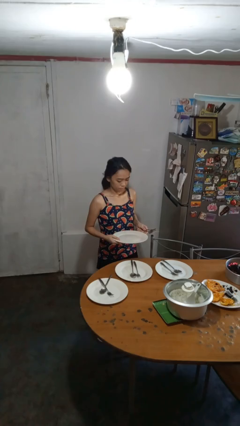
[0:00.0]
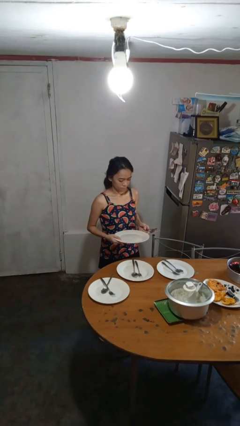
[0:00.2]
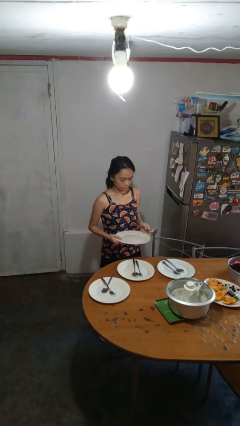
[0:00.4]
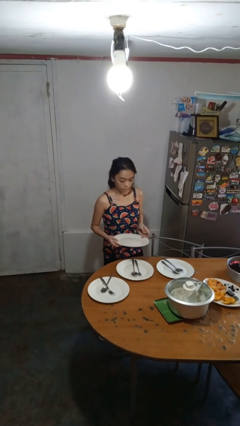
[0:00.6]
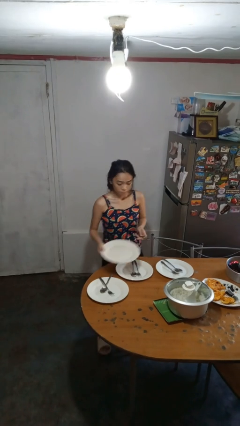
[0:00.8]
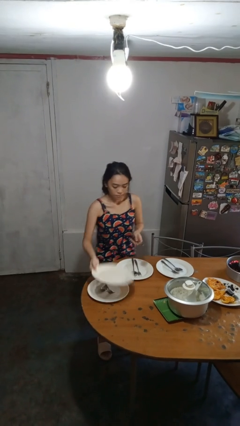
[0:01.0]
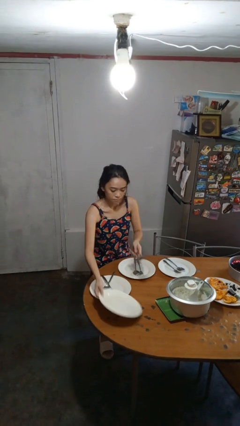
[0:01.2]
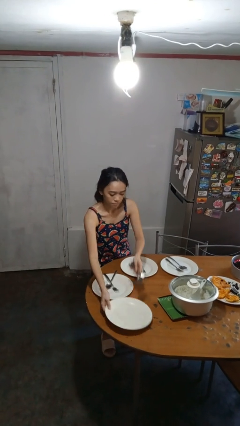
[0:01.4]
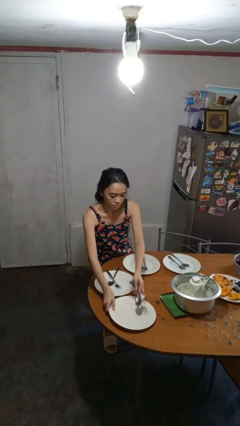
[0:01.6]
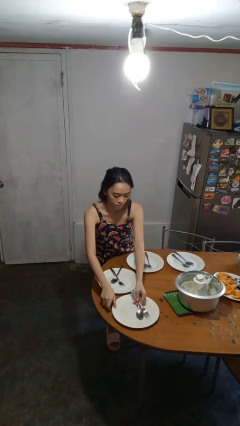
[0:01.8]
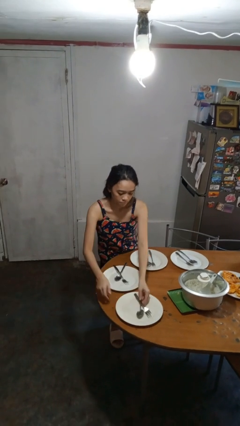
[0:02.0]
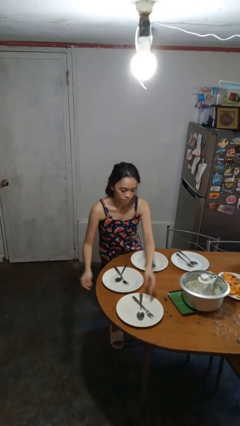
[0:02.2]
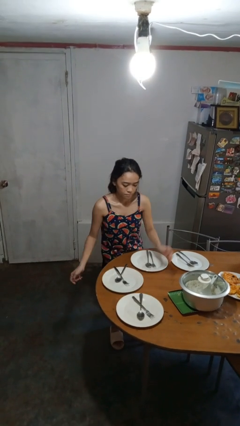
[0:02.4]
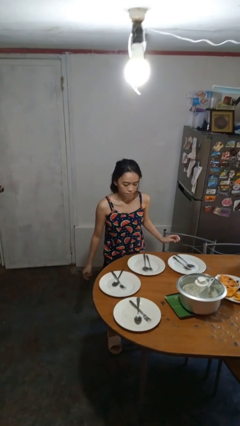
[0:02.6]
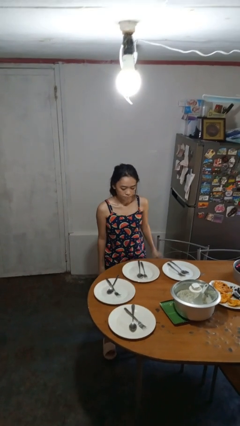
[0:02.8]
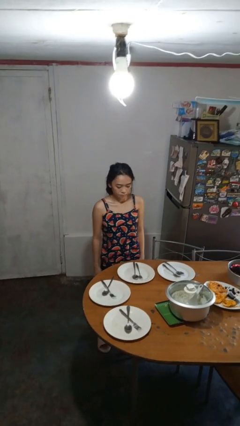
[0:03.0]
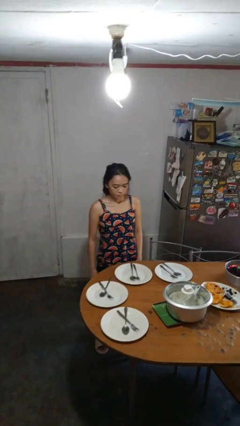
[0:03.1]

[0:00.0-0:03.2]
person sets table

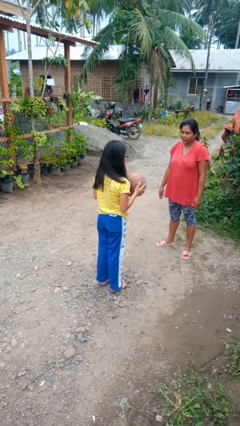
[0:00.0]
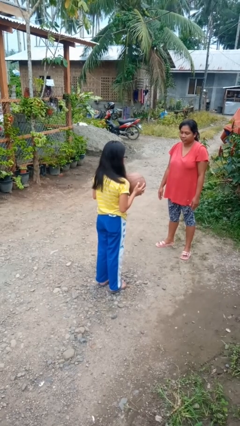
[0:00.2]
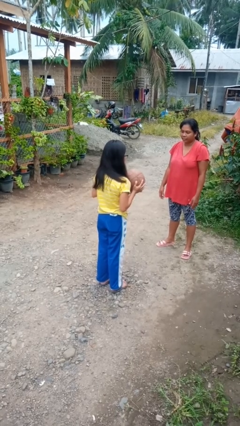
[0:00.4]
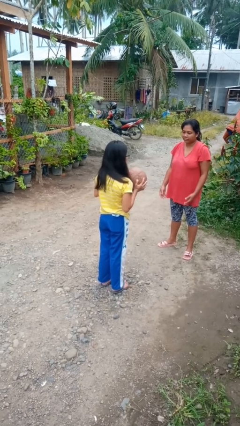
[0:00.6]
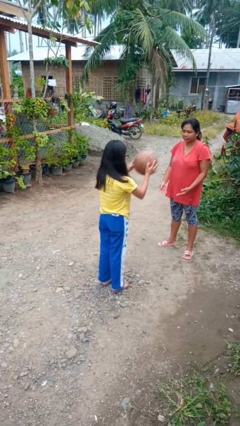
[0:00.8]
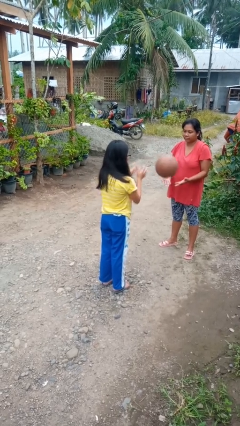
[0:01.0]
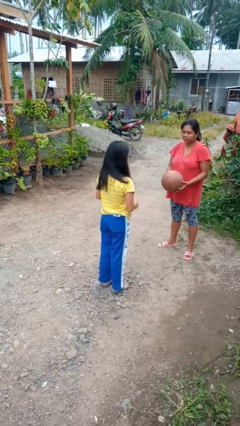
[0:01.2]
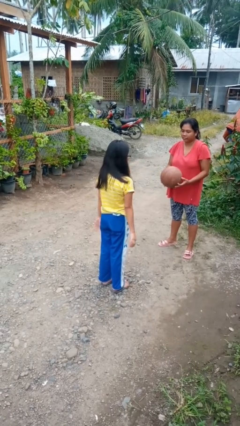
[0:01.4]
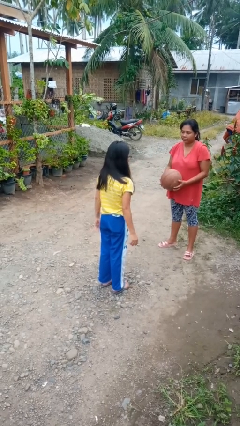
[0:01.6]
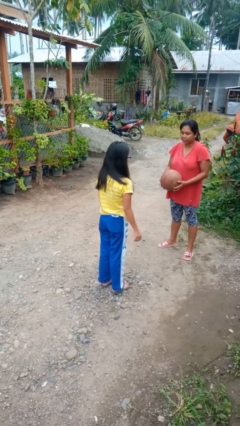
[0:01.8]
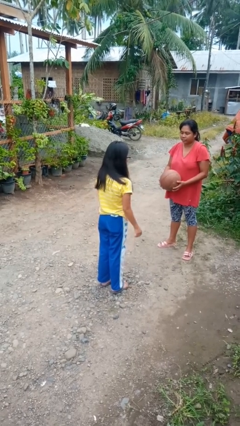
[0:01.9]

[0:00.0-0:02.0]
person throws object to person

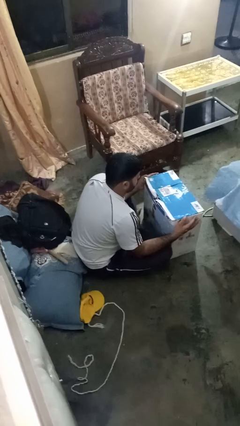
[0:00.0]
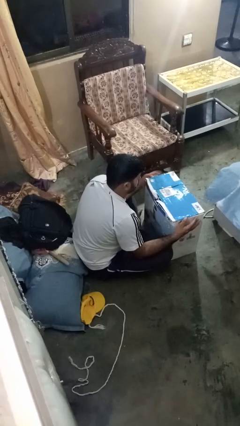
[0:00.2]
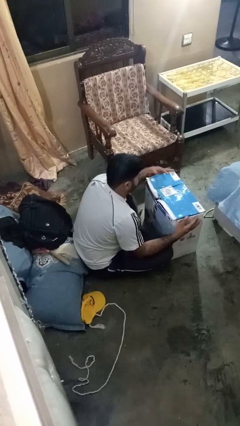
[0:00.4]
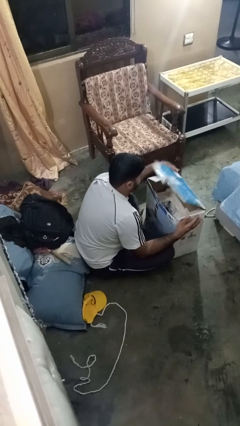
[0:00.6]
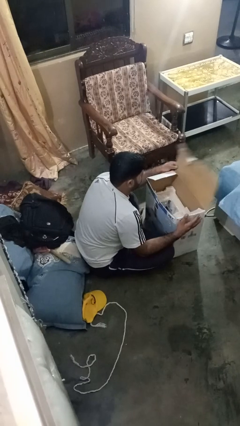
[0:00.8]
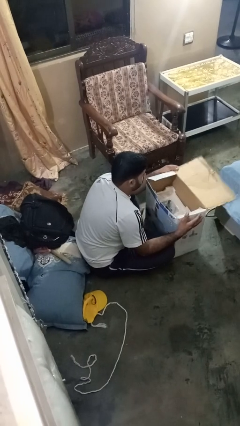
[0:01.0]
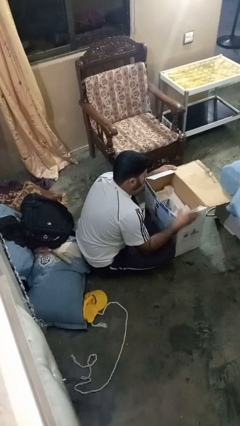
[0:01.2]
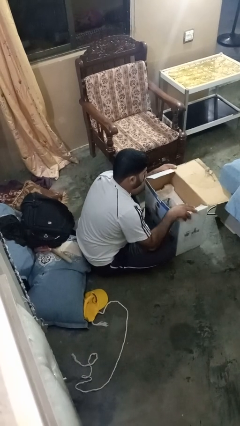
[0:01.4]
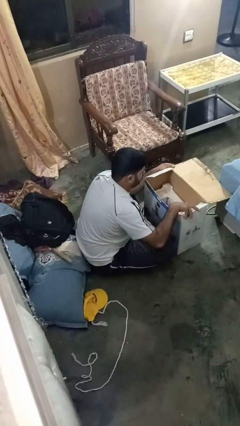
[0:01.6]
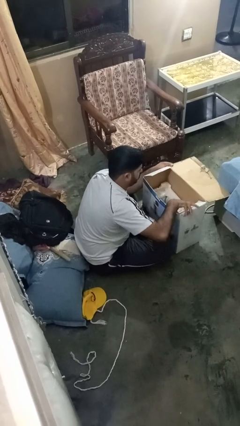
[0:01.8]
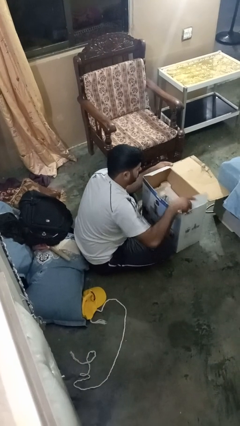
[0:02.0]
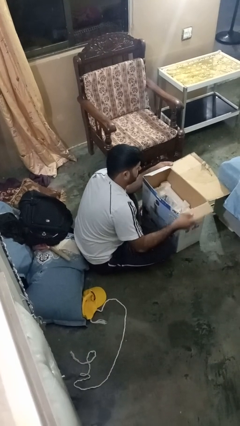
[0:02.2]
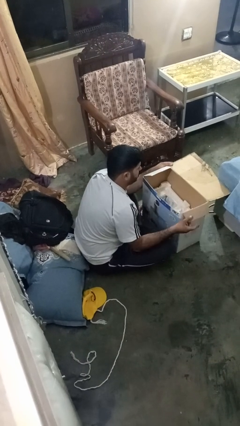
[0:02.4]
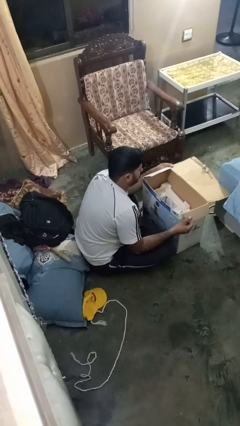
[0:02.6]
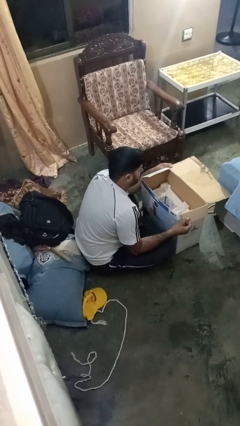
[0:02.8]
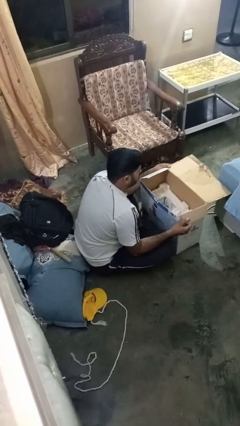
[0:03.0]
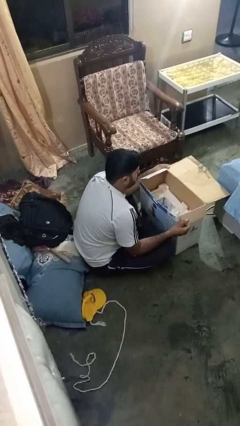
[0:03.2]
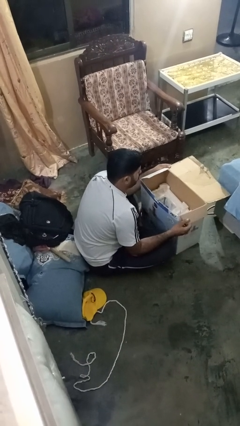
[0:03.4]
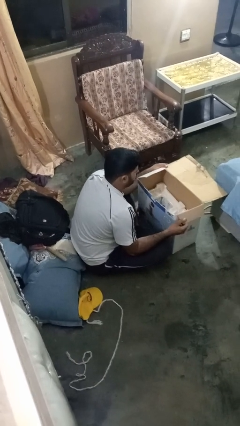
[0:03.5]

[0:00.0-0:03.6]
person opens box

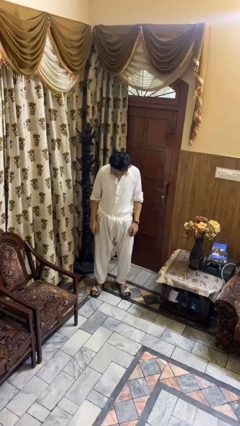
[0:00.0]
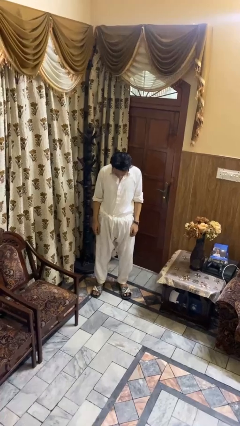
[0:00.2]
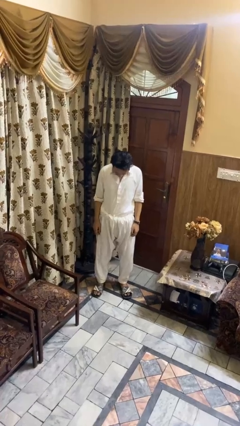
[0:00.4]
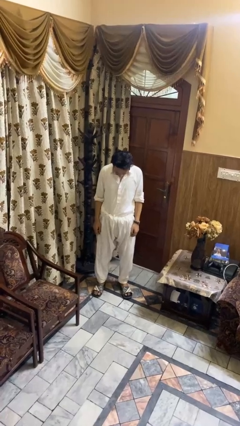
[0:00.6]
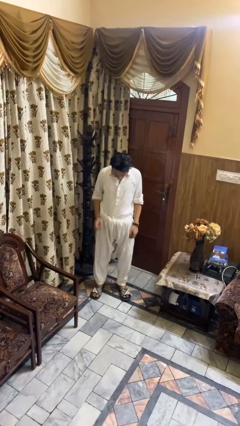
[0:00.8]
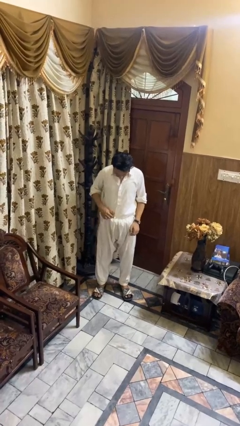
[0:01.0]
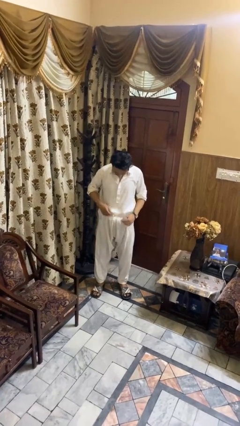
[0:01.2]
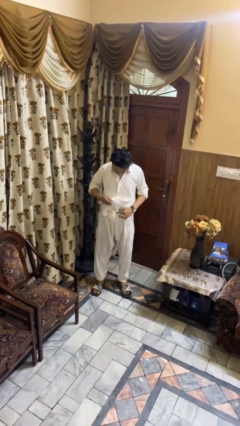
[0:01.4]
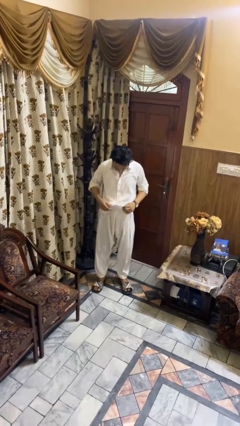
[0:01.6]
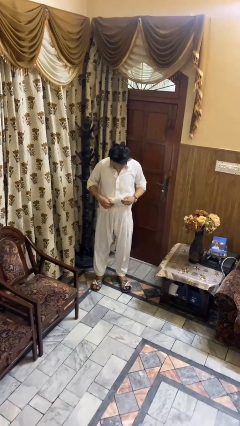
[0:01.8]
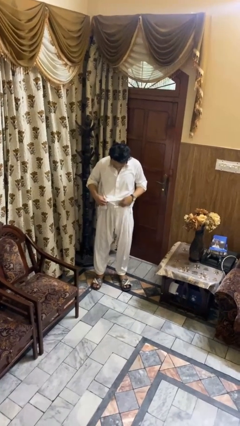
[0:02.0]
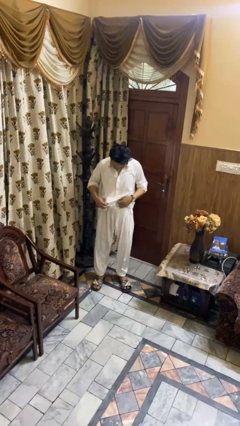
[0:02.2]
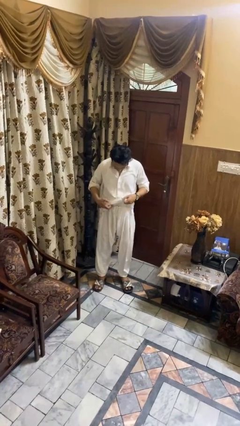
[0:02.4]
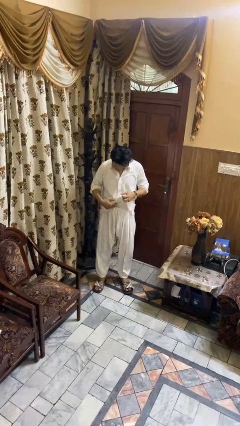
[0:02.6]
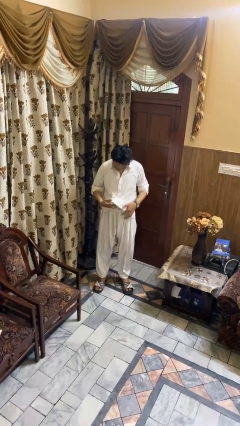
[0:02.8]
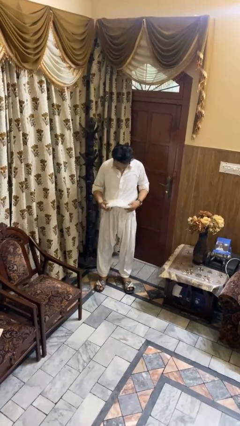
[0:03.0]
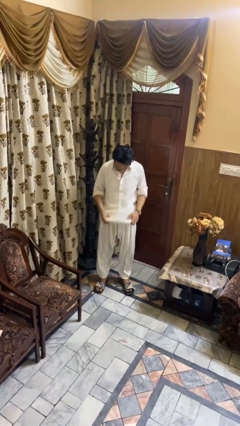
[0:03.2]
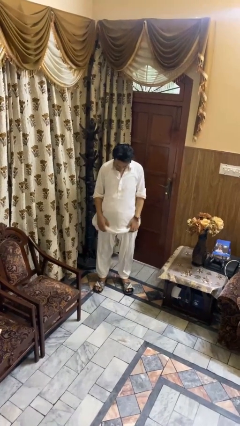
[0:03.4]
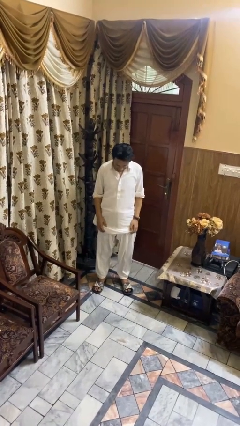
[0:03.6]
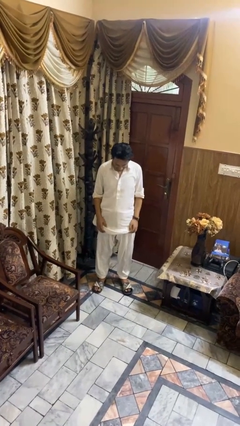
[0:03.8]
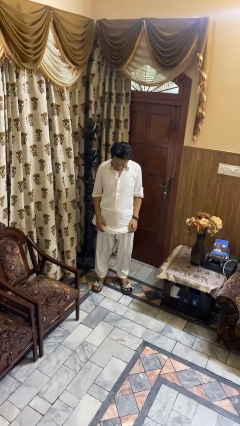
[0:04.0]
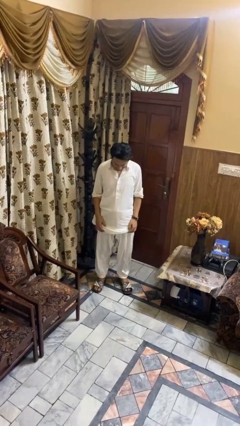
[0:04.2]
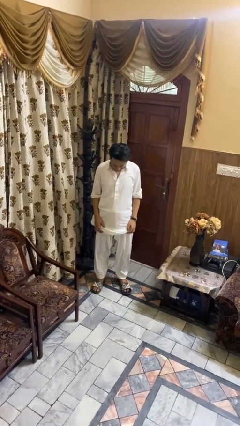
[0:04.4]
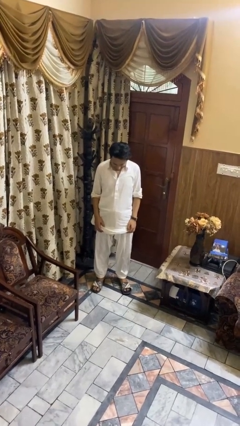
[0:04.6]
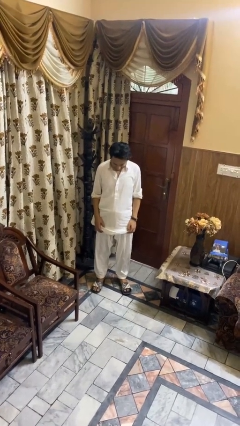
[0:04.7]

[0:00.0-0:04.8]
person untucks shirt

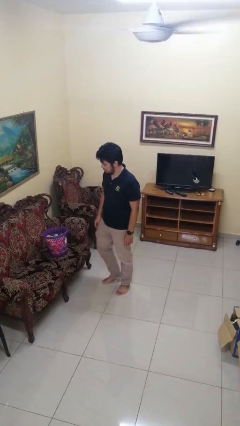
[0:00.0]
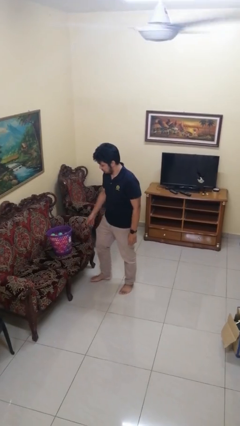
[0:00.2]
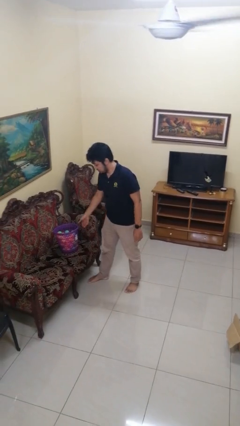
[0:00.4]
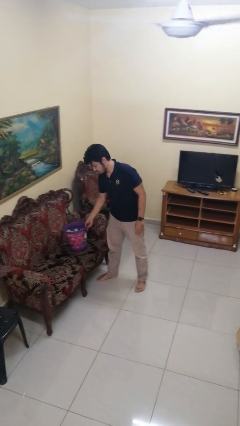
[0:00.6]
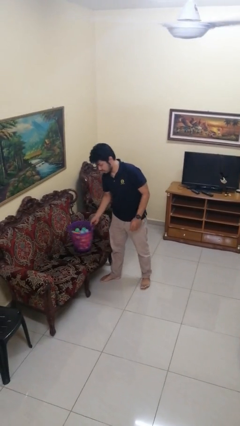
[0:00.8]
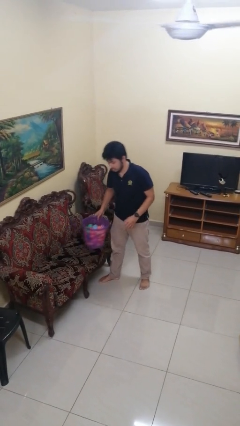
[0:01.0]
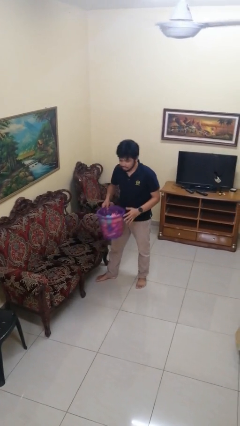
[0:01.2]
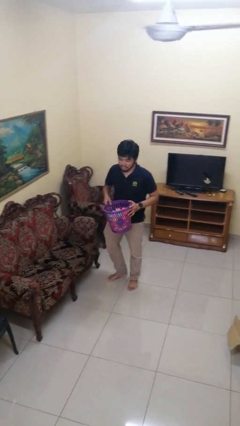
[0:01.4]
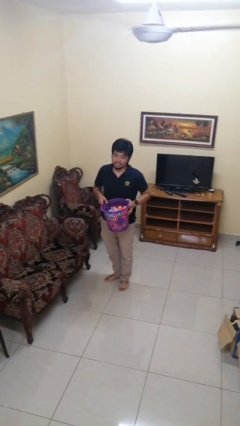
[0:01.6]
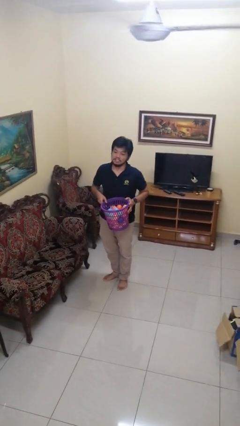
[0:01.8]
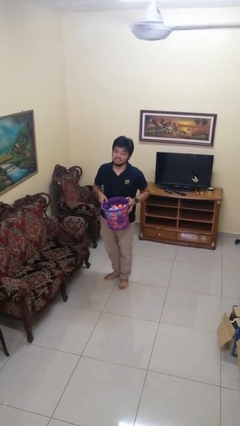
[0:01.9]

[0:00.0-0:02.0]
person picks up object from couch

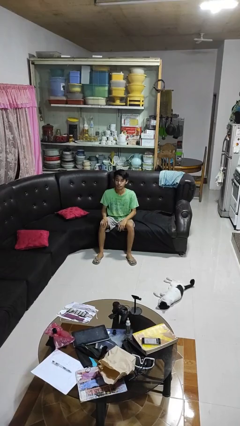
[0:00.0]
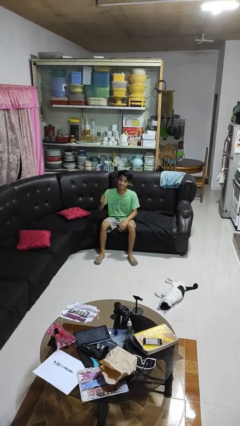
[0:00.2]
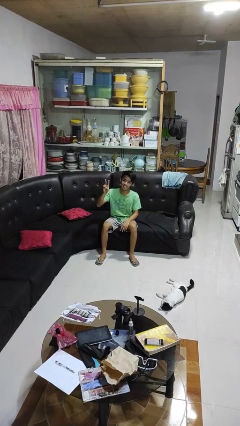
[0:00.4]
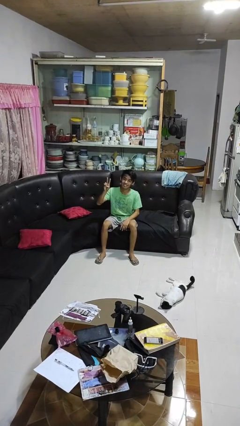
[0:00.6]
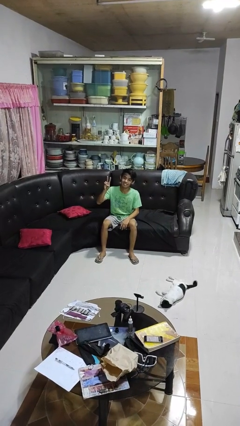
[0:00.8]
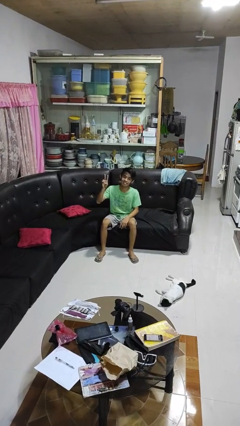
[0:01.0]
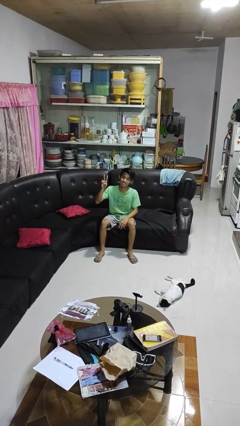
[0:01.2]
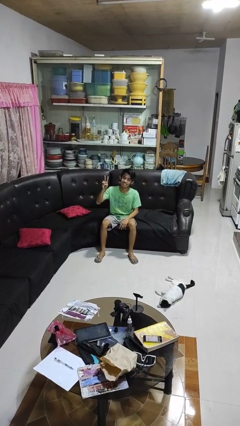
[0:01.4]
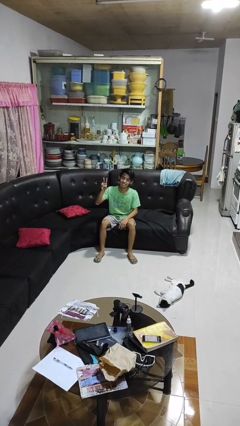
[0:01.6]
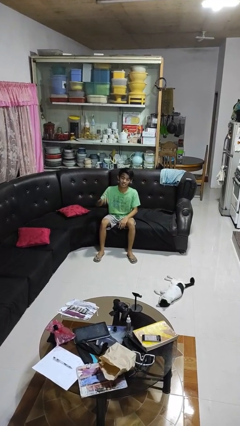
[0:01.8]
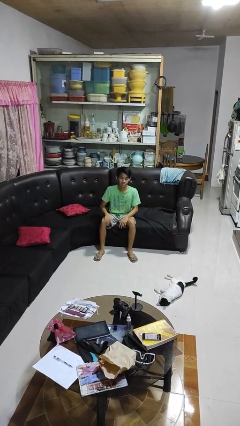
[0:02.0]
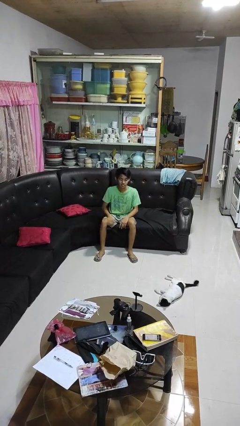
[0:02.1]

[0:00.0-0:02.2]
person gestures peace
